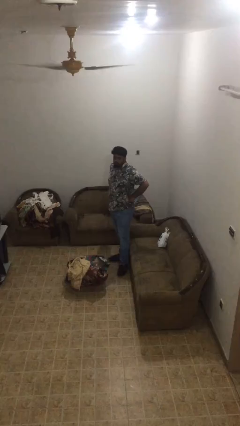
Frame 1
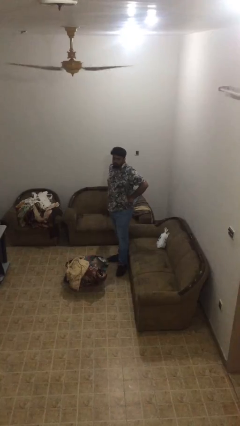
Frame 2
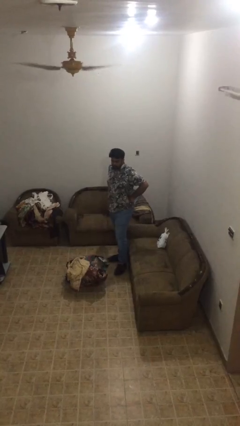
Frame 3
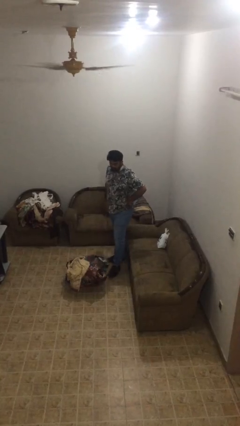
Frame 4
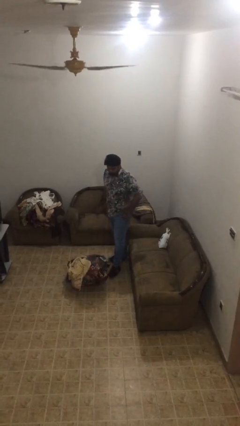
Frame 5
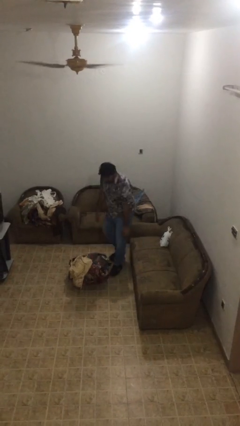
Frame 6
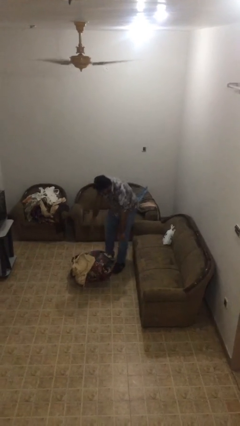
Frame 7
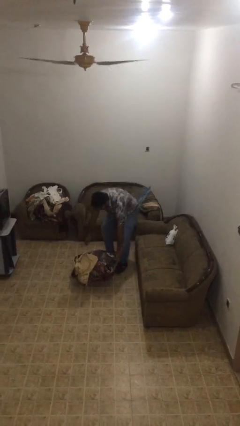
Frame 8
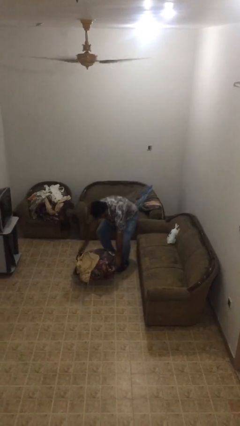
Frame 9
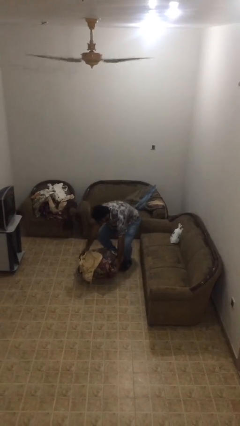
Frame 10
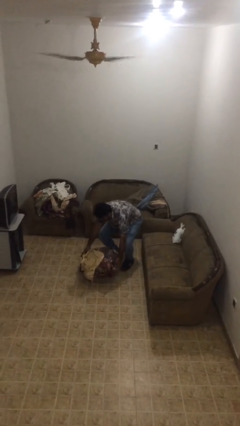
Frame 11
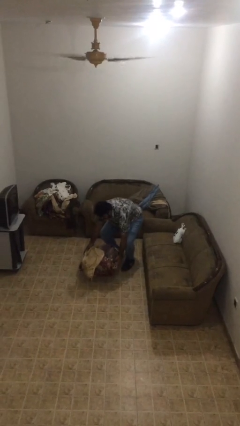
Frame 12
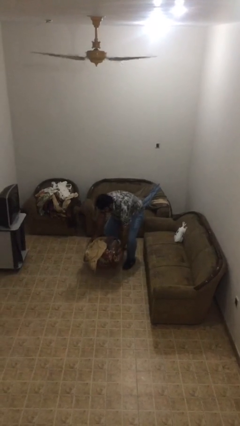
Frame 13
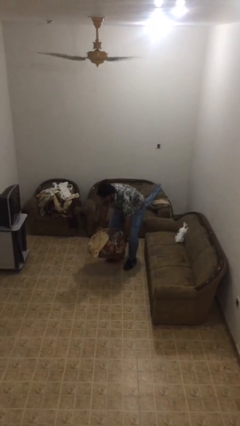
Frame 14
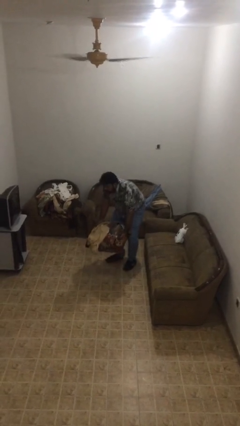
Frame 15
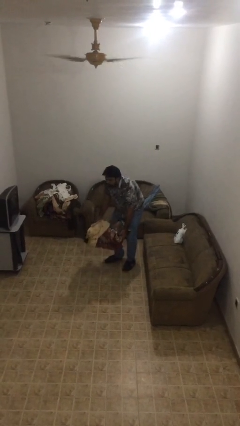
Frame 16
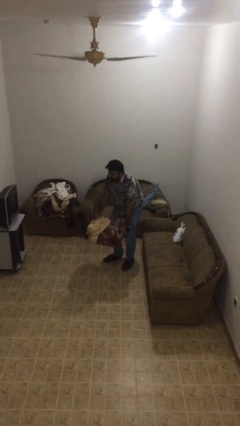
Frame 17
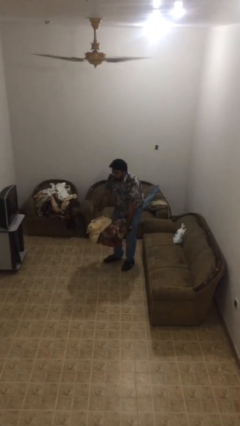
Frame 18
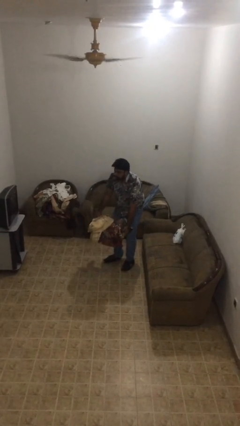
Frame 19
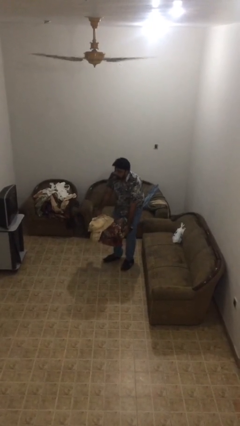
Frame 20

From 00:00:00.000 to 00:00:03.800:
person picks up object from floor

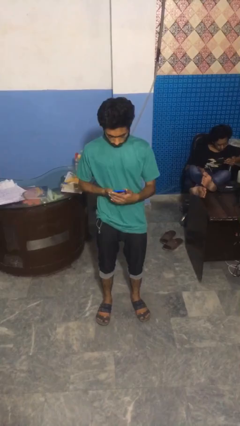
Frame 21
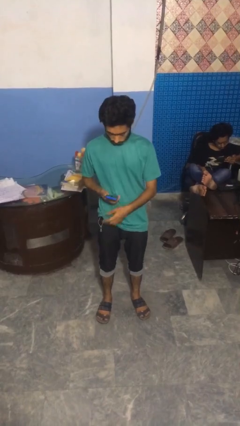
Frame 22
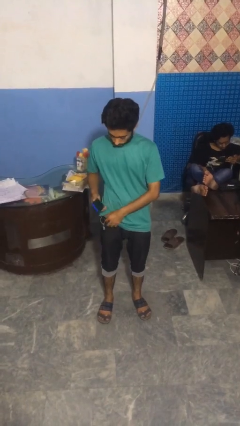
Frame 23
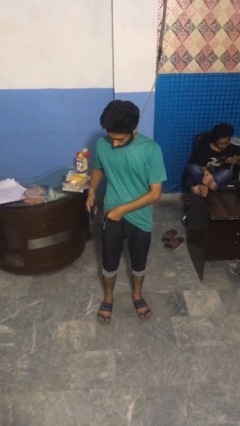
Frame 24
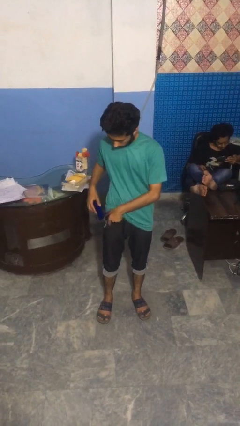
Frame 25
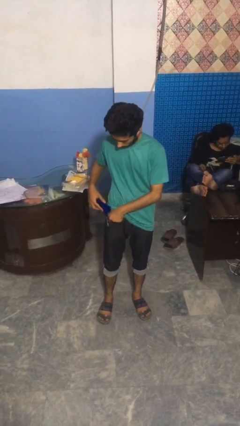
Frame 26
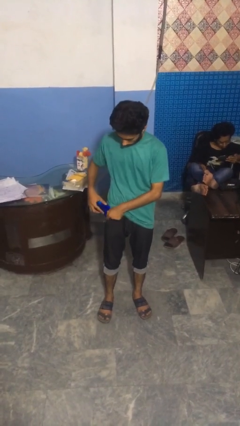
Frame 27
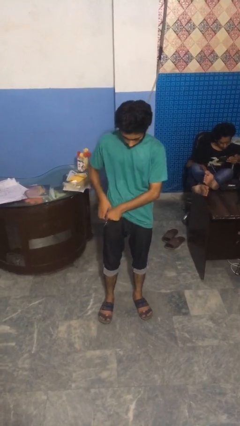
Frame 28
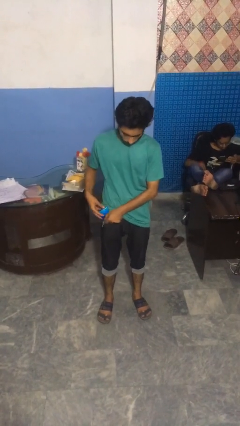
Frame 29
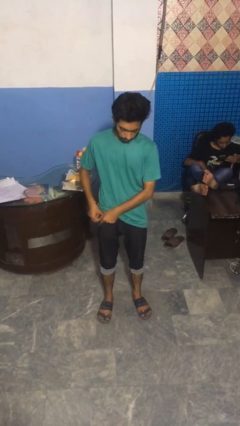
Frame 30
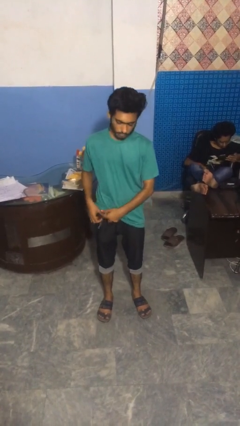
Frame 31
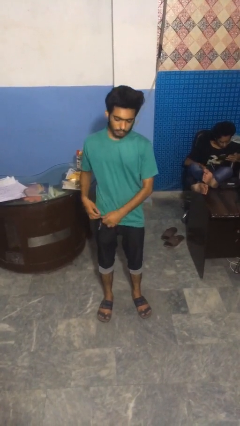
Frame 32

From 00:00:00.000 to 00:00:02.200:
person puts phone into pocket

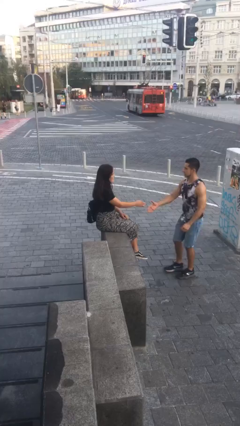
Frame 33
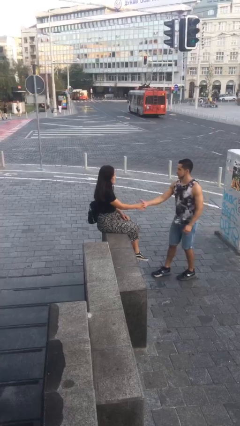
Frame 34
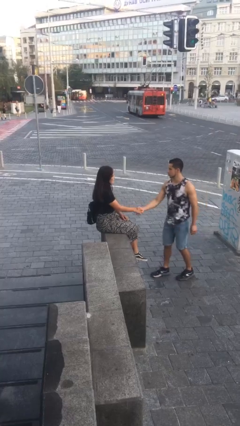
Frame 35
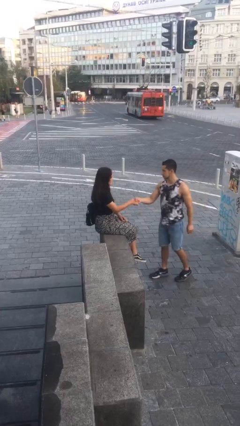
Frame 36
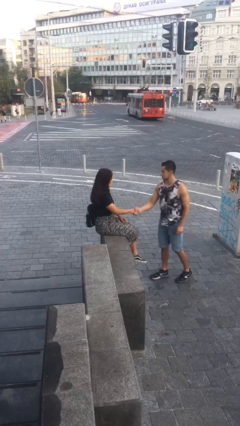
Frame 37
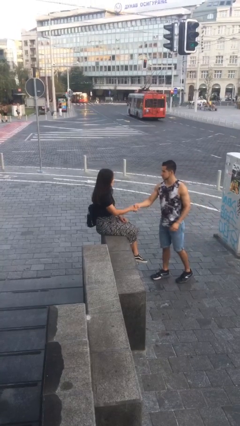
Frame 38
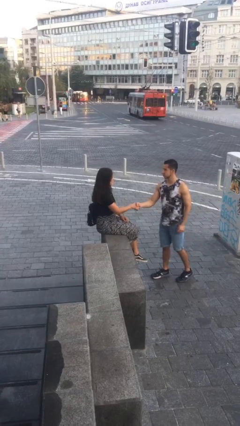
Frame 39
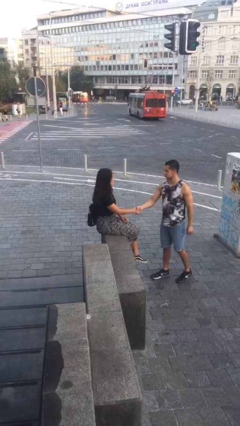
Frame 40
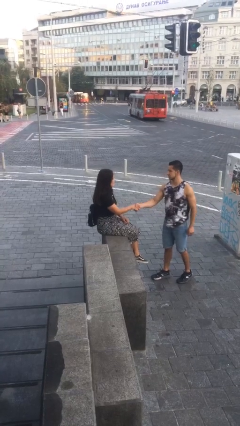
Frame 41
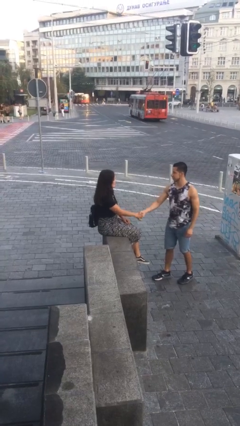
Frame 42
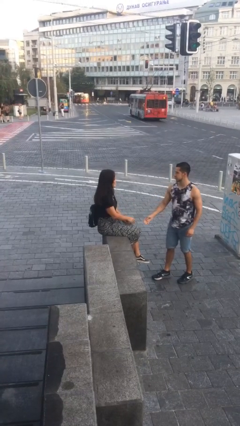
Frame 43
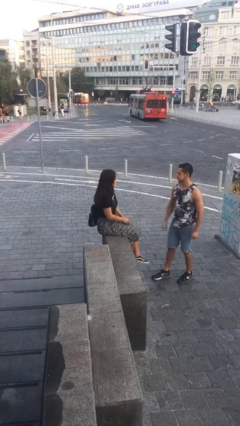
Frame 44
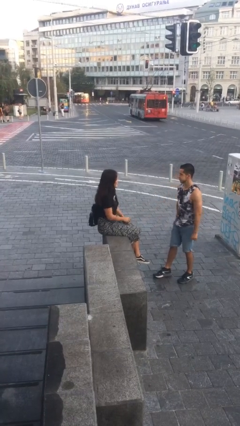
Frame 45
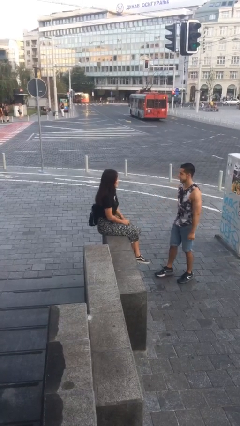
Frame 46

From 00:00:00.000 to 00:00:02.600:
person shakes hand

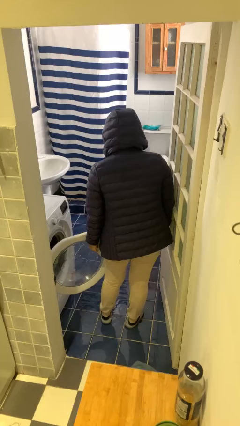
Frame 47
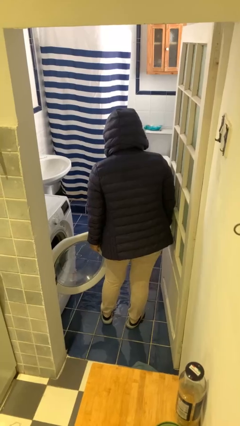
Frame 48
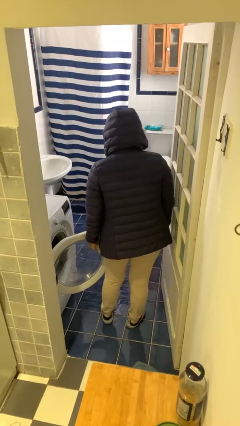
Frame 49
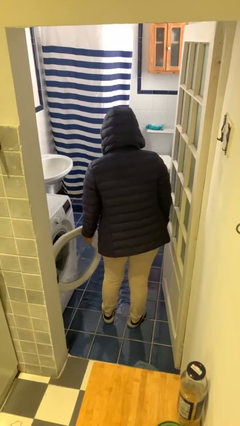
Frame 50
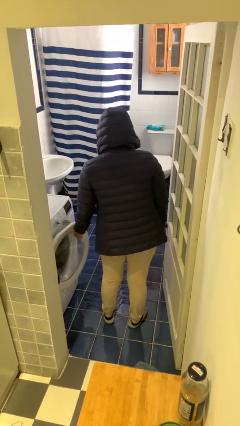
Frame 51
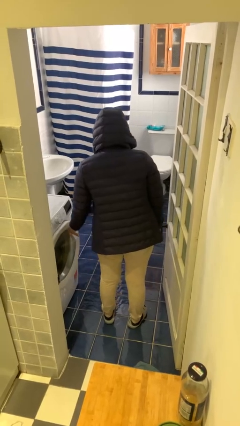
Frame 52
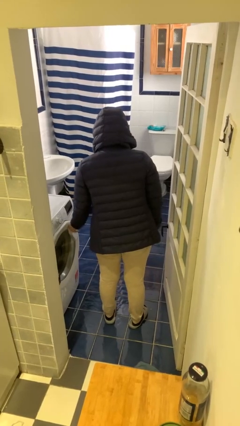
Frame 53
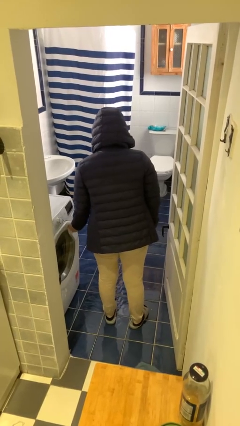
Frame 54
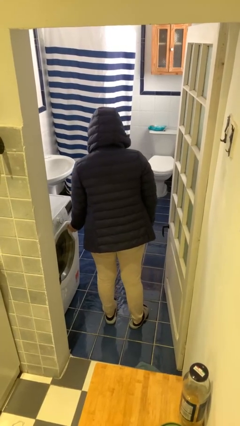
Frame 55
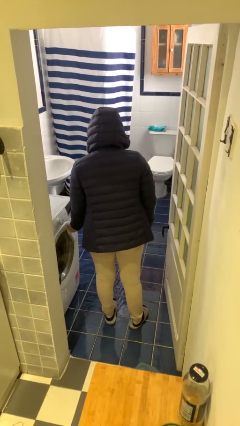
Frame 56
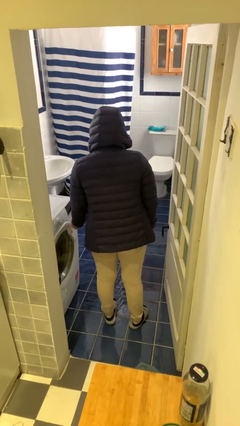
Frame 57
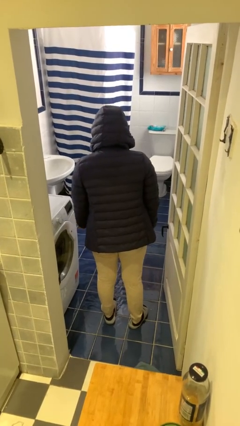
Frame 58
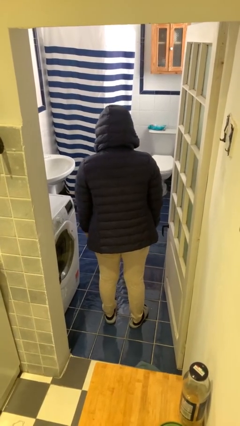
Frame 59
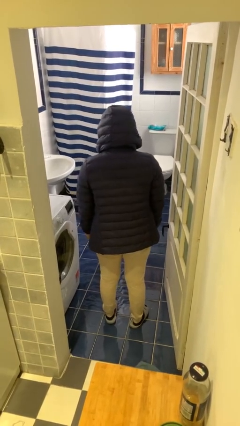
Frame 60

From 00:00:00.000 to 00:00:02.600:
person closes clothes washer

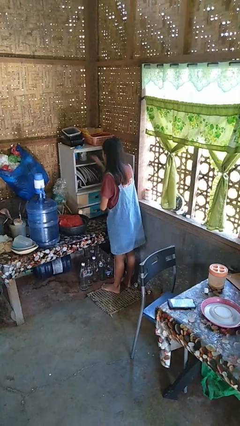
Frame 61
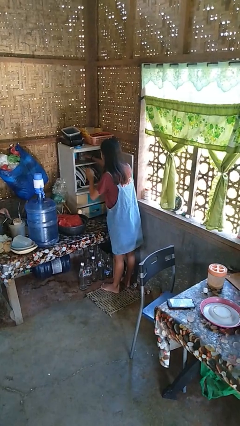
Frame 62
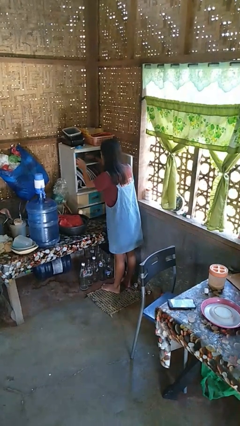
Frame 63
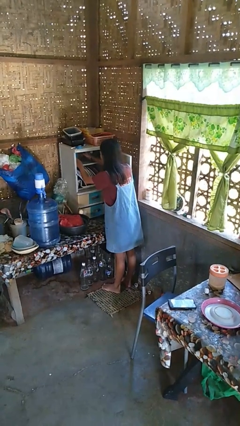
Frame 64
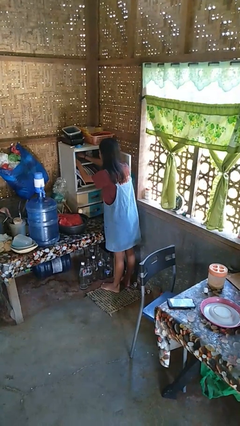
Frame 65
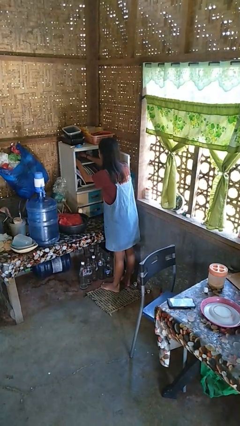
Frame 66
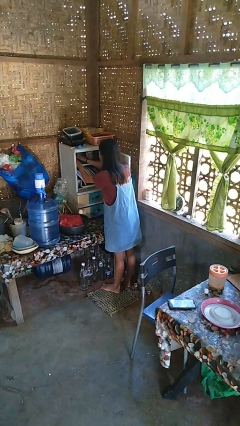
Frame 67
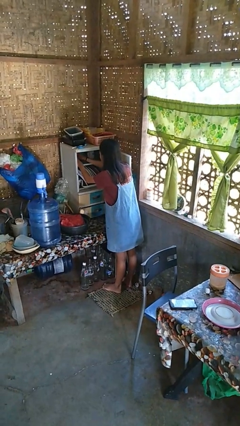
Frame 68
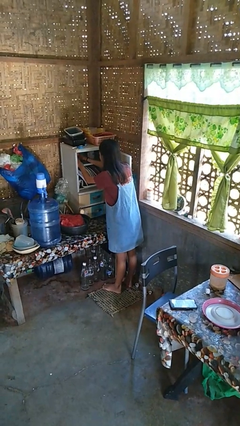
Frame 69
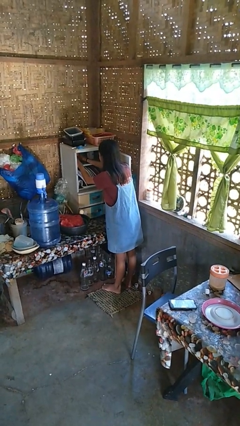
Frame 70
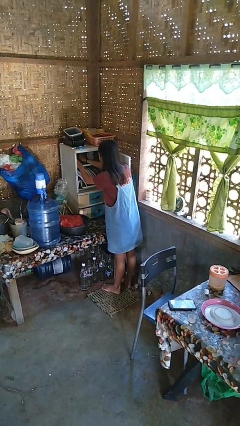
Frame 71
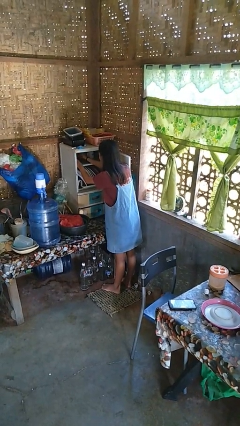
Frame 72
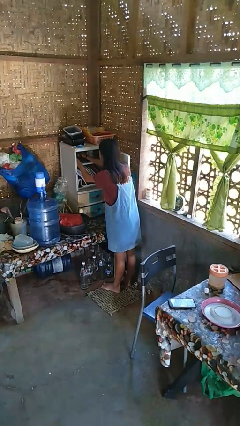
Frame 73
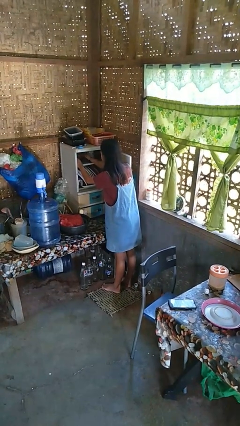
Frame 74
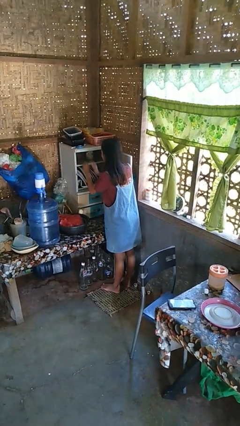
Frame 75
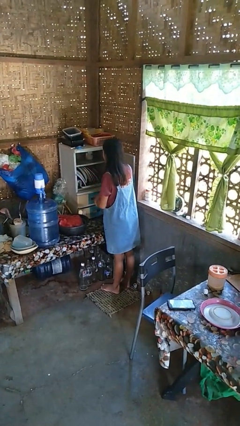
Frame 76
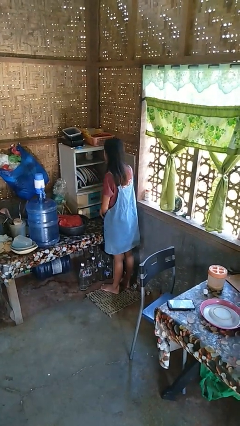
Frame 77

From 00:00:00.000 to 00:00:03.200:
person searches in cabinet

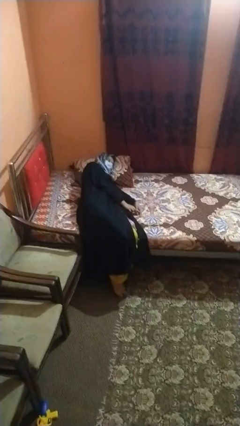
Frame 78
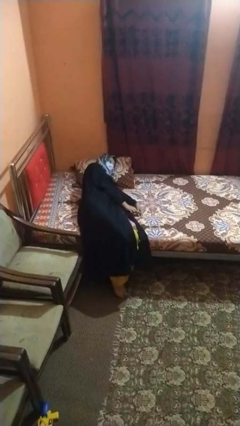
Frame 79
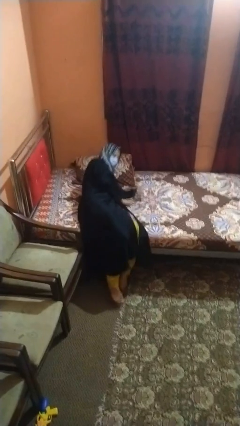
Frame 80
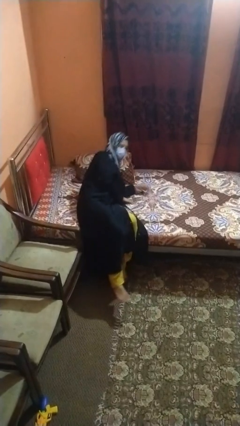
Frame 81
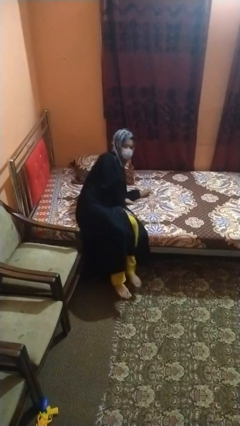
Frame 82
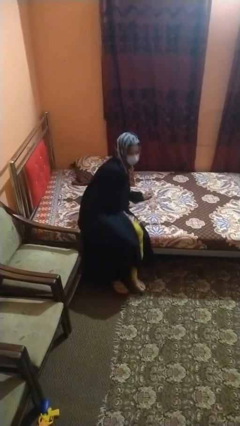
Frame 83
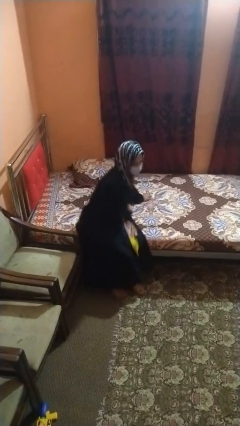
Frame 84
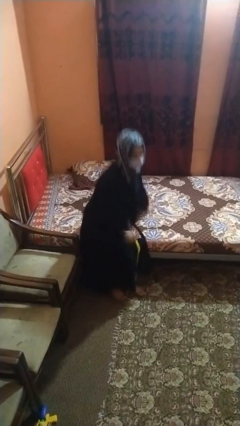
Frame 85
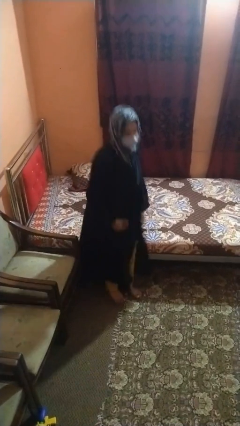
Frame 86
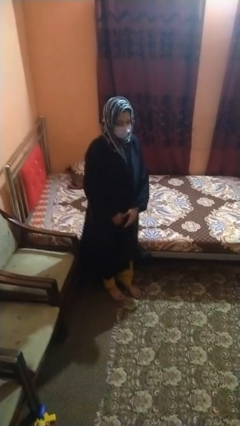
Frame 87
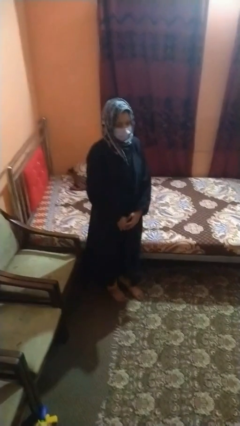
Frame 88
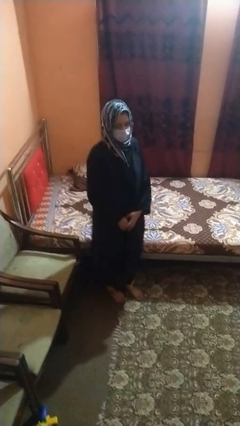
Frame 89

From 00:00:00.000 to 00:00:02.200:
person stands up

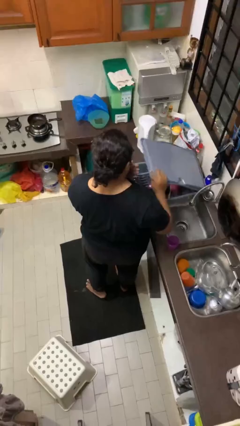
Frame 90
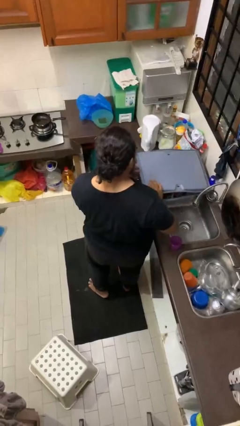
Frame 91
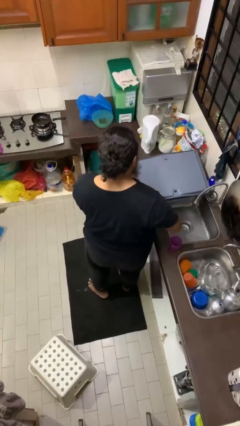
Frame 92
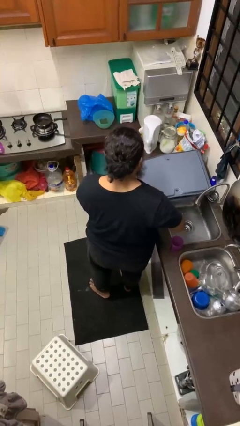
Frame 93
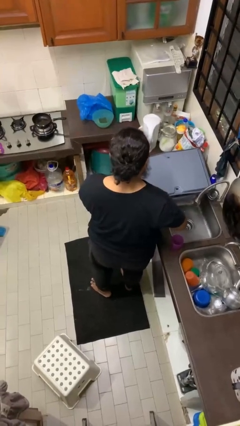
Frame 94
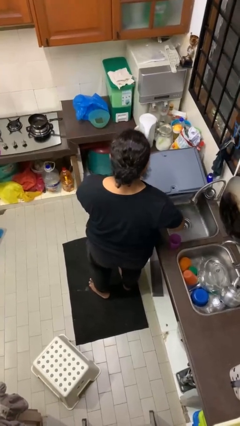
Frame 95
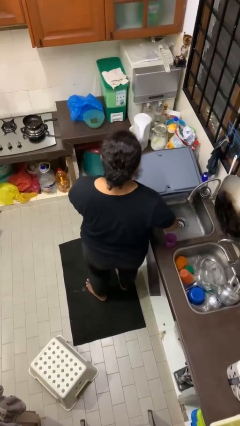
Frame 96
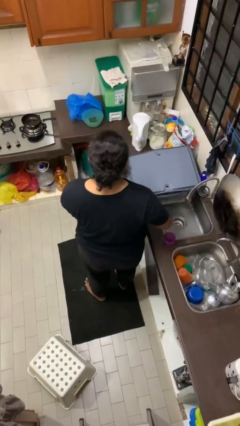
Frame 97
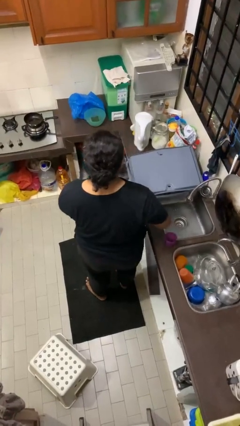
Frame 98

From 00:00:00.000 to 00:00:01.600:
person closes dishwasher
